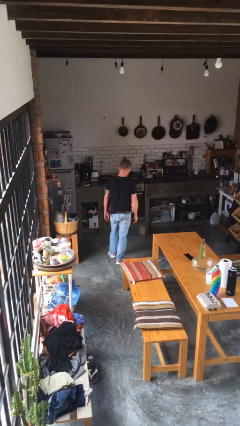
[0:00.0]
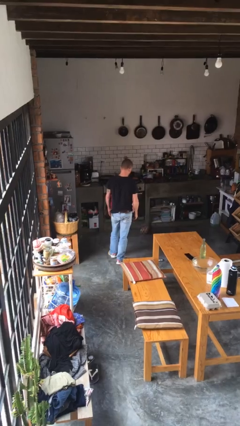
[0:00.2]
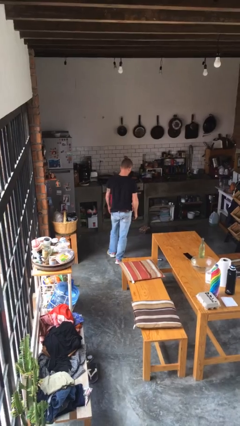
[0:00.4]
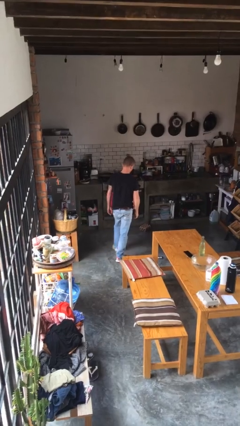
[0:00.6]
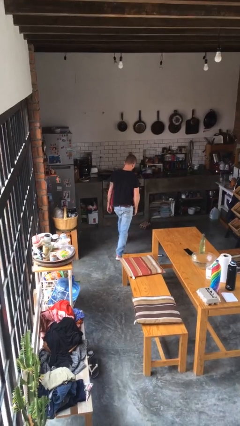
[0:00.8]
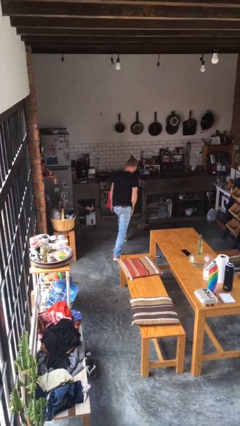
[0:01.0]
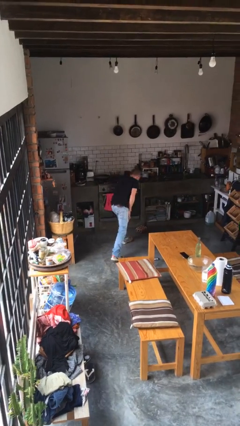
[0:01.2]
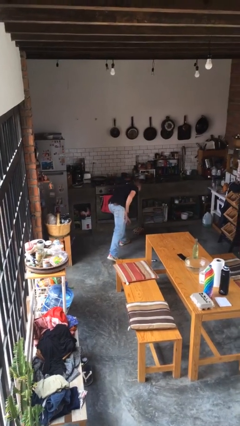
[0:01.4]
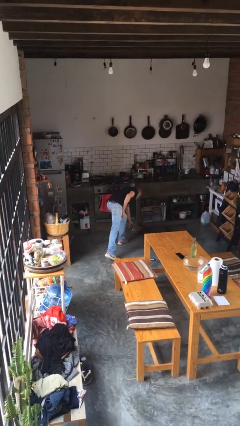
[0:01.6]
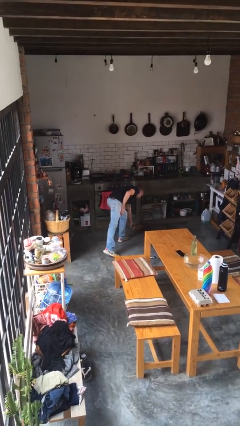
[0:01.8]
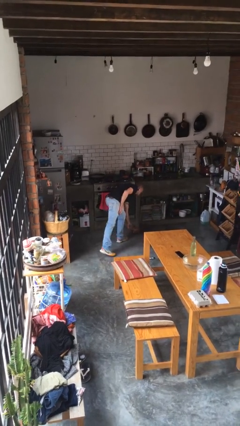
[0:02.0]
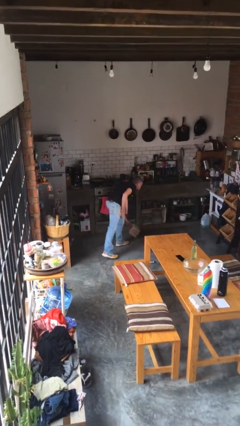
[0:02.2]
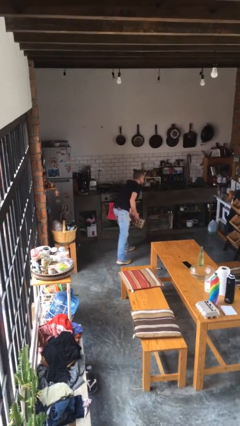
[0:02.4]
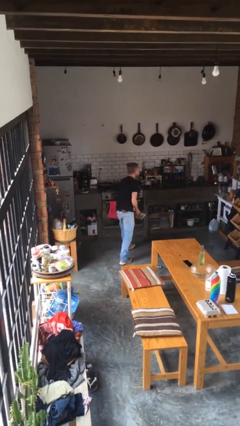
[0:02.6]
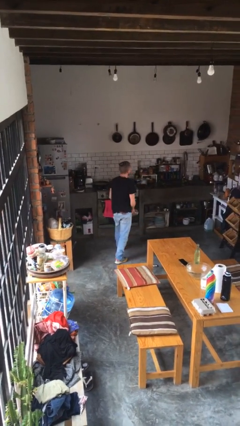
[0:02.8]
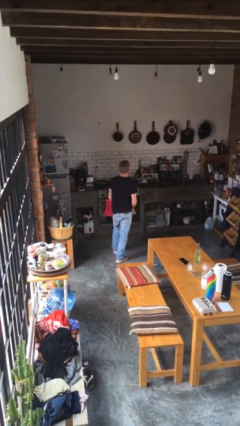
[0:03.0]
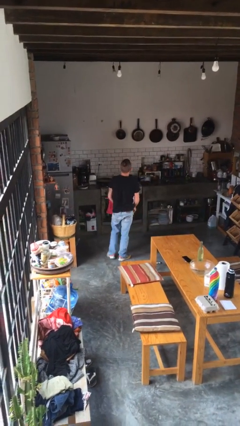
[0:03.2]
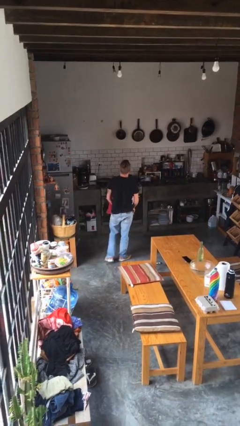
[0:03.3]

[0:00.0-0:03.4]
person picks up object from floor

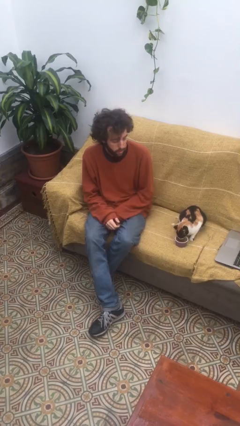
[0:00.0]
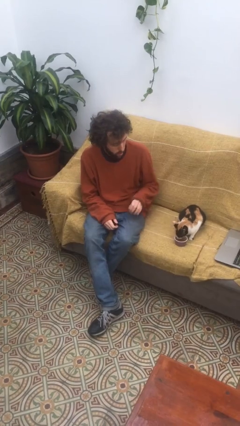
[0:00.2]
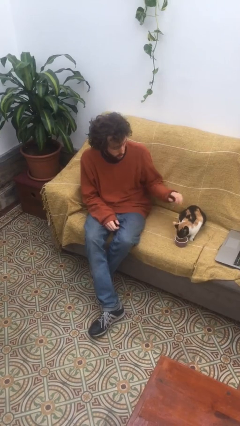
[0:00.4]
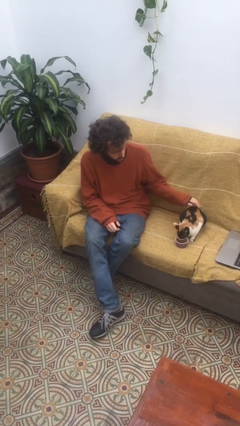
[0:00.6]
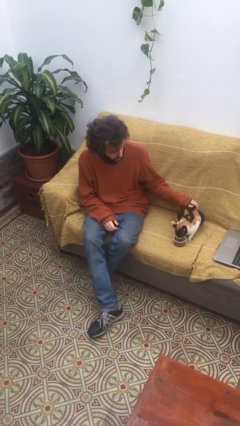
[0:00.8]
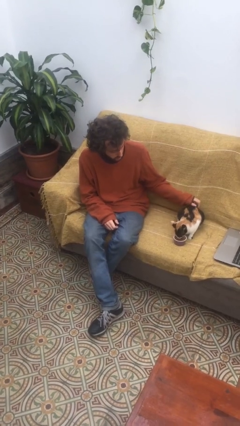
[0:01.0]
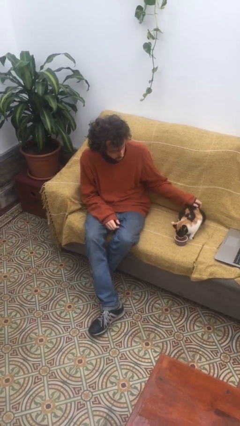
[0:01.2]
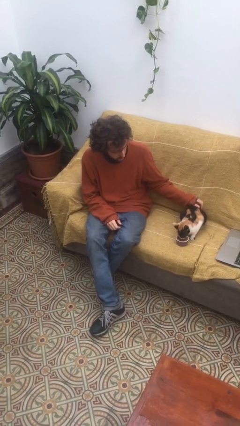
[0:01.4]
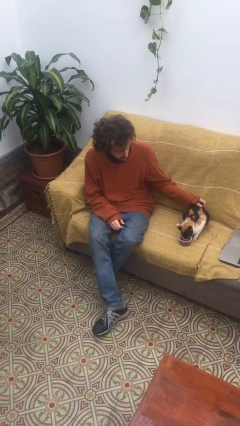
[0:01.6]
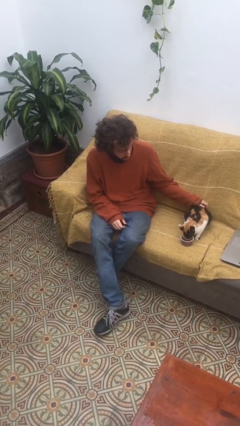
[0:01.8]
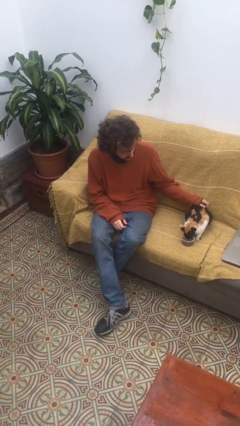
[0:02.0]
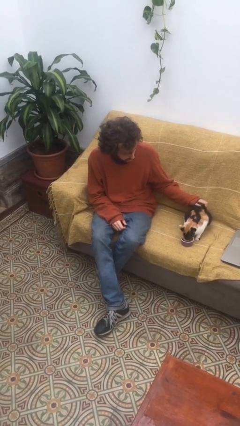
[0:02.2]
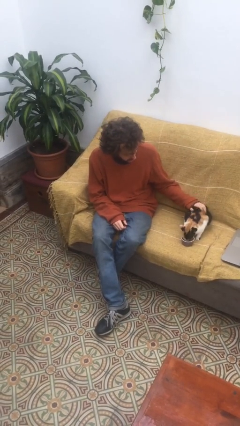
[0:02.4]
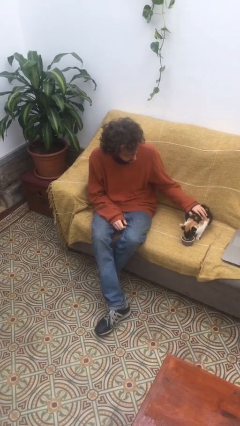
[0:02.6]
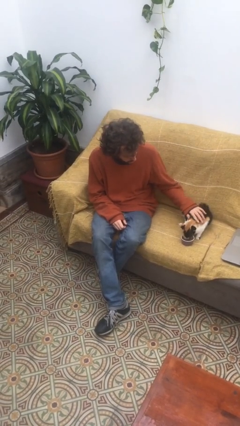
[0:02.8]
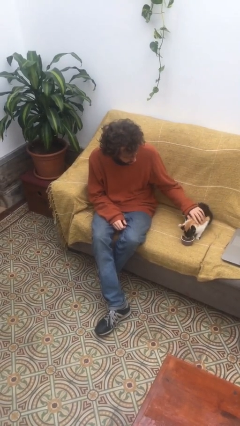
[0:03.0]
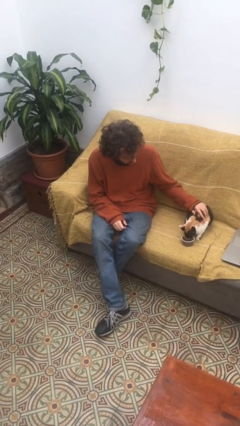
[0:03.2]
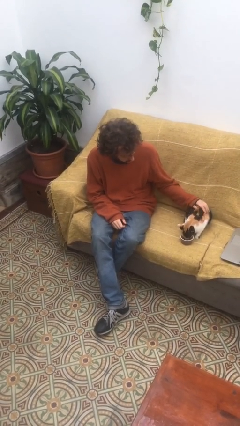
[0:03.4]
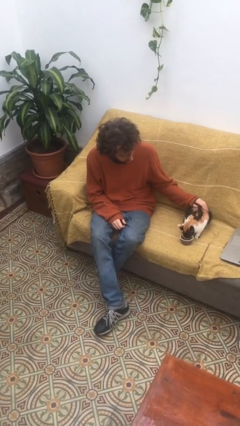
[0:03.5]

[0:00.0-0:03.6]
person pets cat

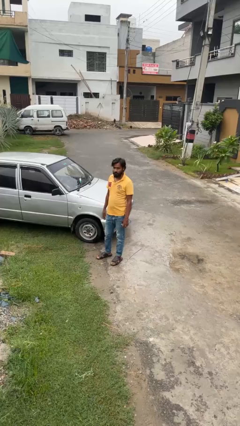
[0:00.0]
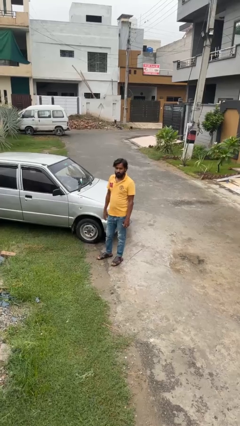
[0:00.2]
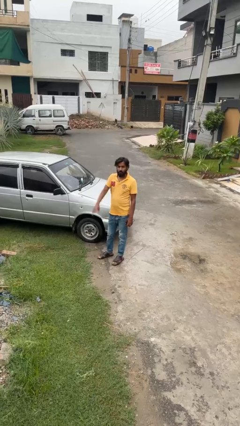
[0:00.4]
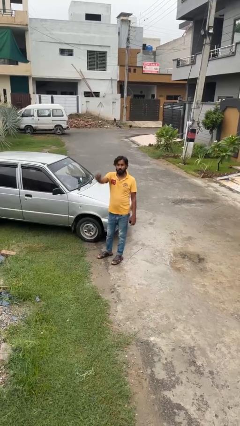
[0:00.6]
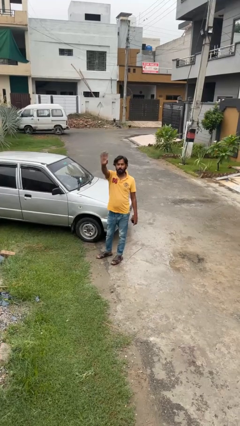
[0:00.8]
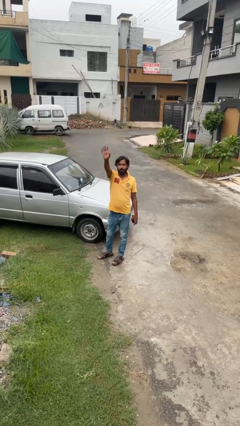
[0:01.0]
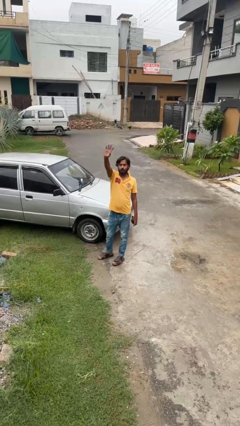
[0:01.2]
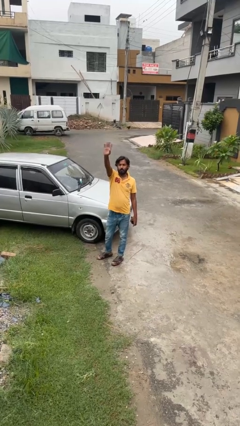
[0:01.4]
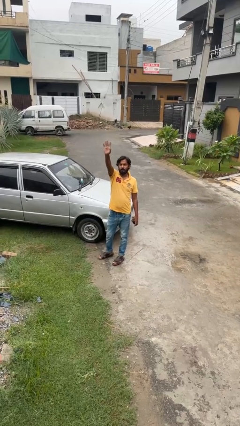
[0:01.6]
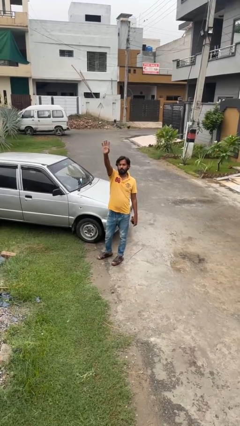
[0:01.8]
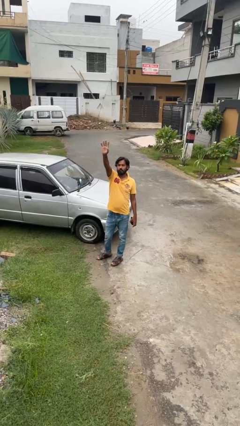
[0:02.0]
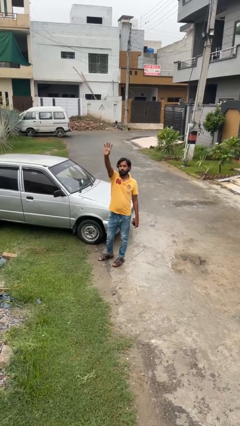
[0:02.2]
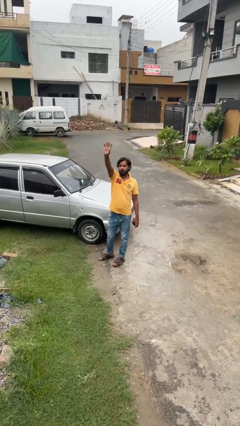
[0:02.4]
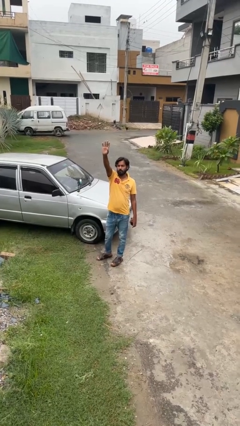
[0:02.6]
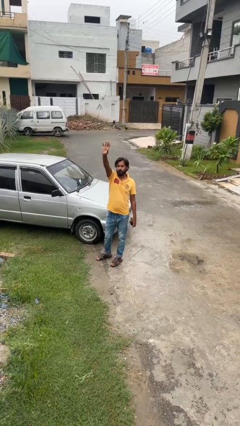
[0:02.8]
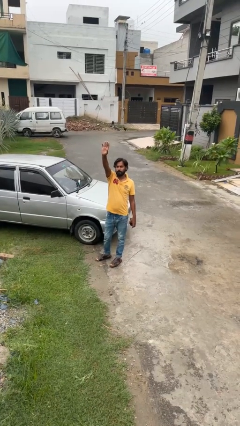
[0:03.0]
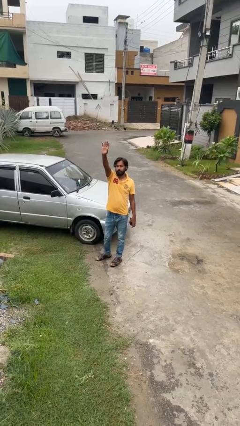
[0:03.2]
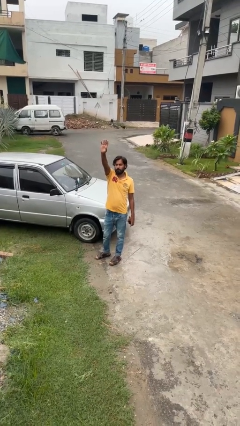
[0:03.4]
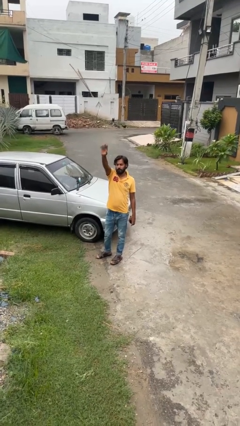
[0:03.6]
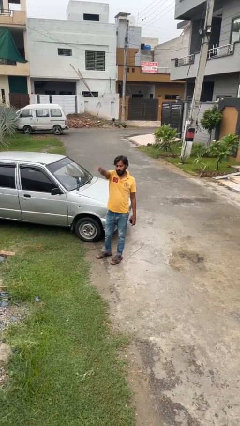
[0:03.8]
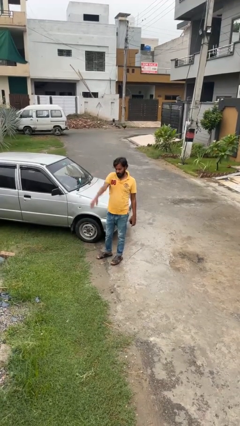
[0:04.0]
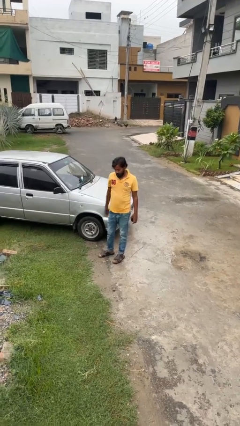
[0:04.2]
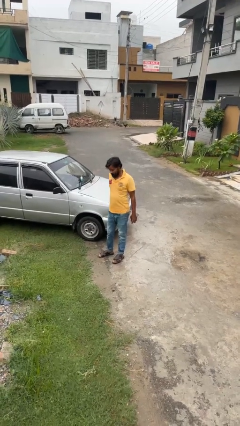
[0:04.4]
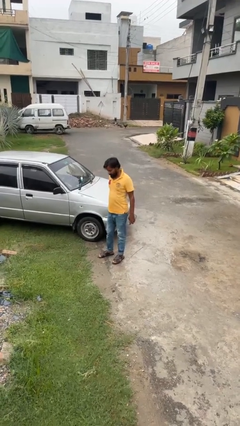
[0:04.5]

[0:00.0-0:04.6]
person waves at person

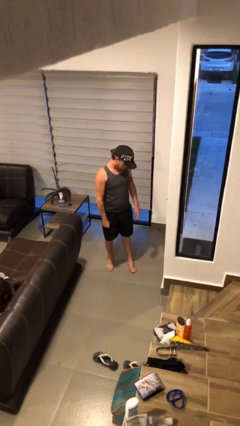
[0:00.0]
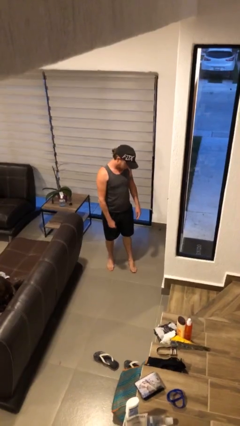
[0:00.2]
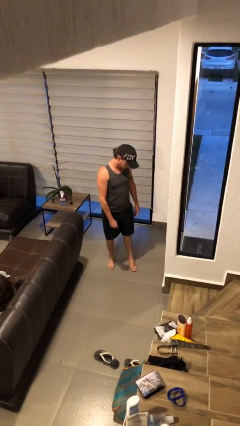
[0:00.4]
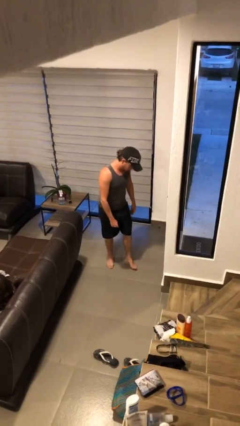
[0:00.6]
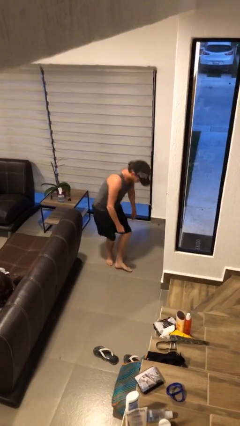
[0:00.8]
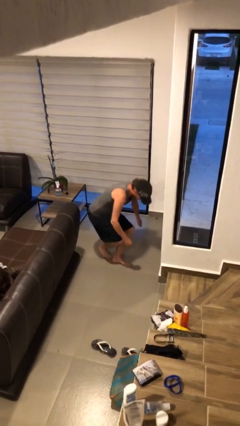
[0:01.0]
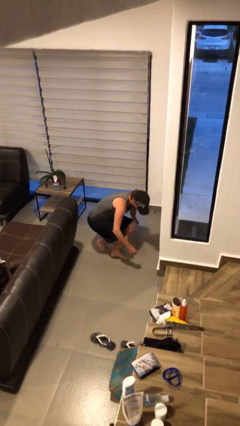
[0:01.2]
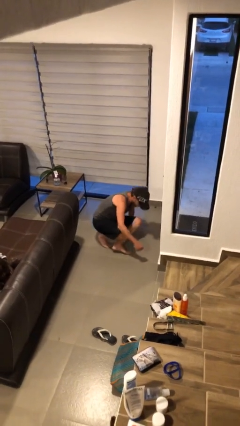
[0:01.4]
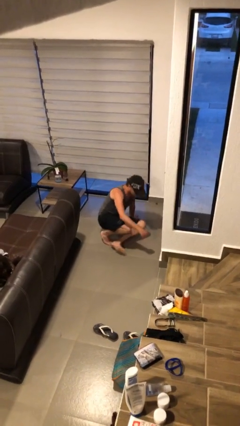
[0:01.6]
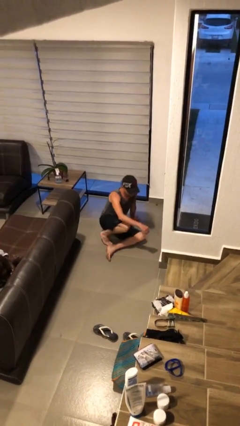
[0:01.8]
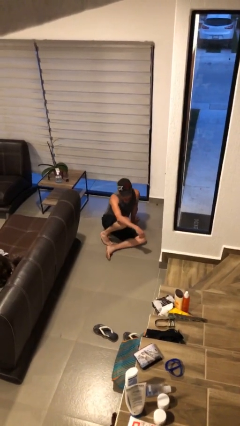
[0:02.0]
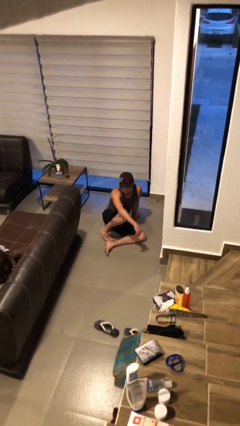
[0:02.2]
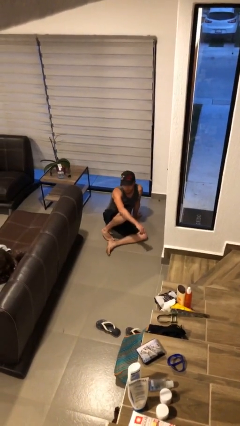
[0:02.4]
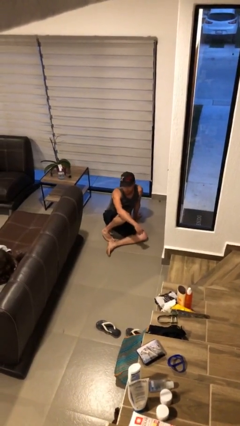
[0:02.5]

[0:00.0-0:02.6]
person sits down

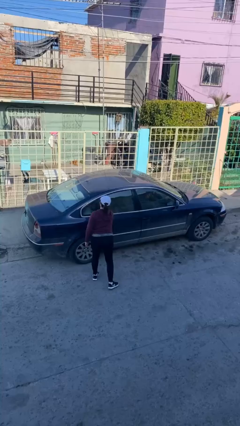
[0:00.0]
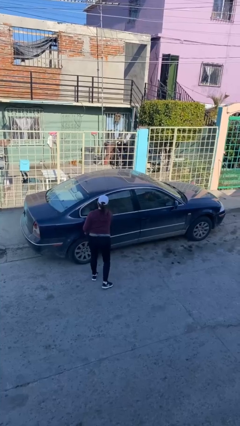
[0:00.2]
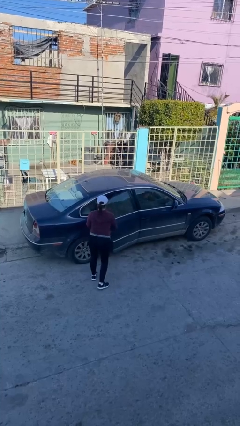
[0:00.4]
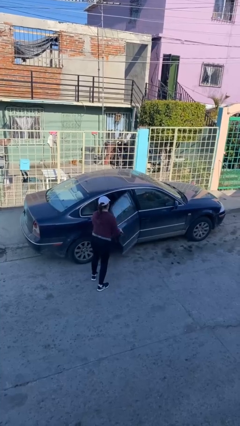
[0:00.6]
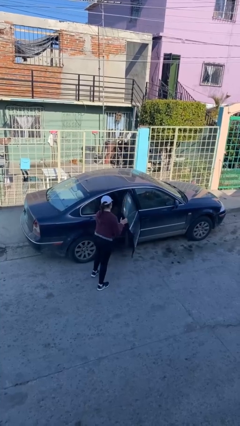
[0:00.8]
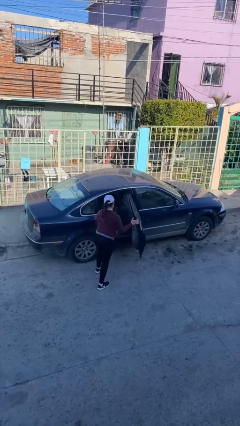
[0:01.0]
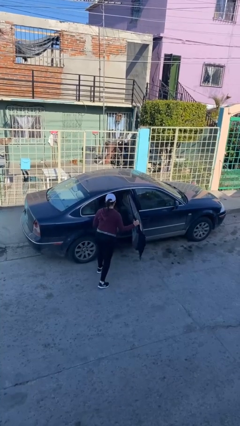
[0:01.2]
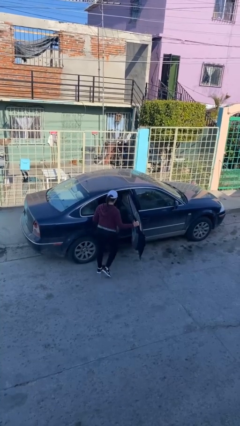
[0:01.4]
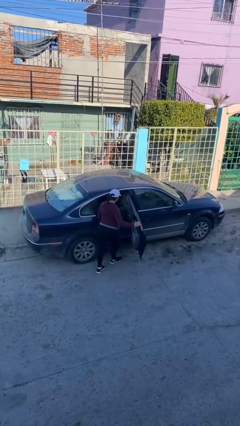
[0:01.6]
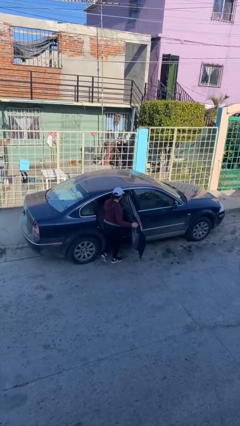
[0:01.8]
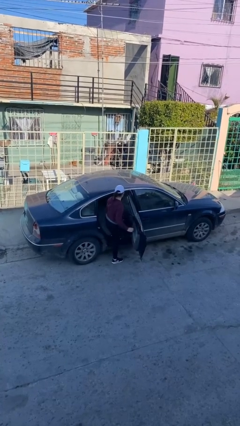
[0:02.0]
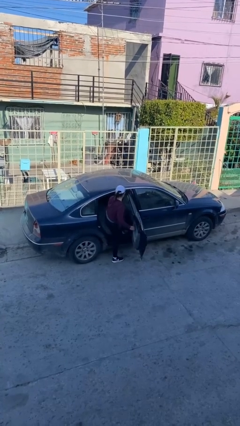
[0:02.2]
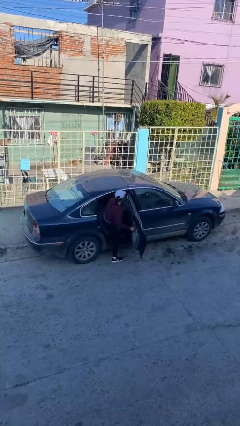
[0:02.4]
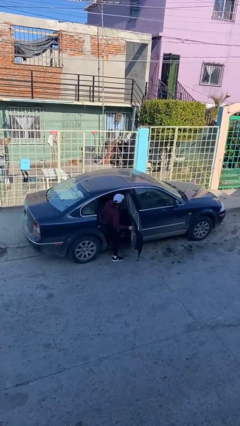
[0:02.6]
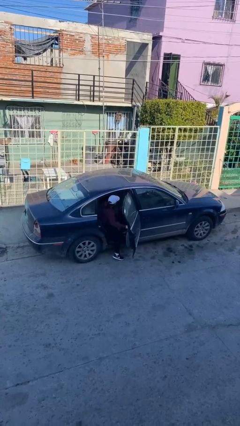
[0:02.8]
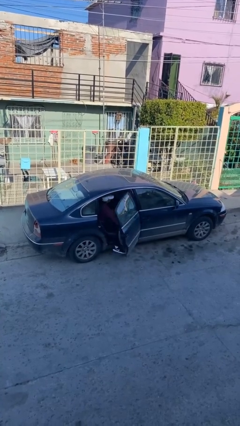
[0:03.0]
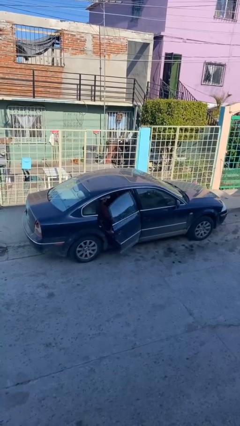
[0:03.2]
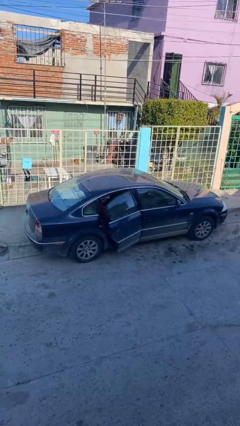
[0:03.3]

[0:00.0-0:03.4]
car picks up person

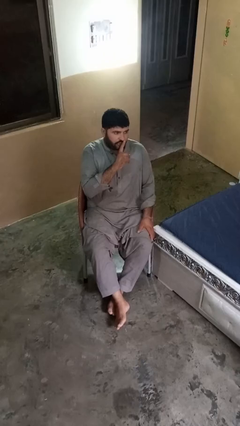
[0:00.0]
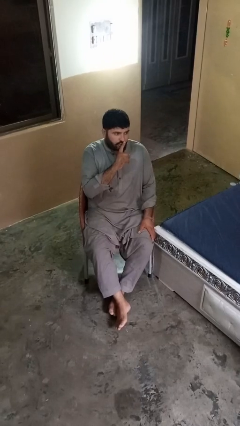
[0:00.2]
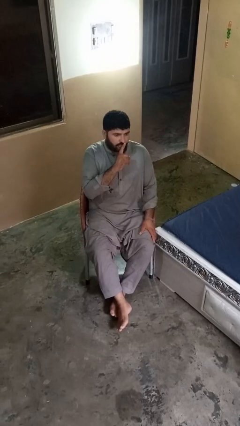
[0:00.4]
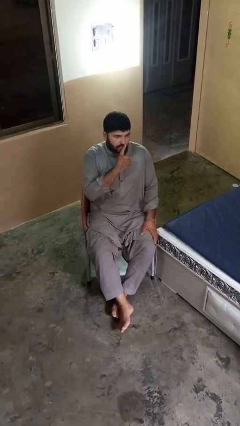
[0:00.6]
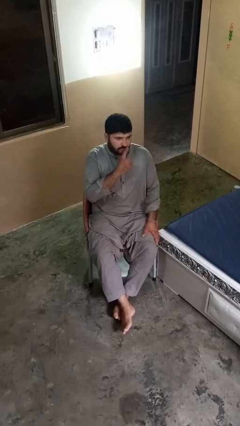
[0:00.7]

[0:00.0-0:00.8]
person gestures be quiet
